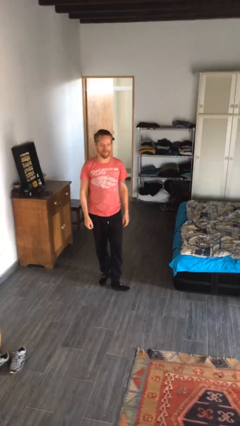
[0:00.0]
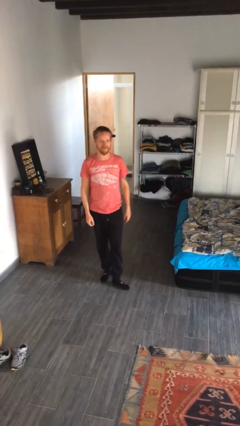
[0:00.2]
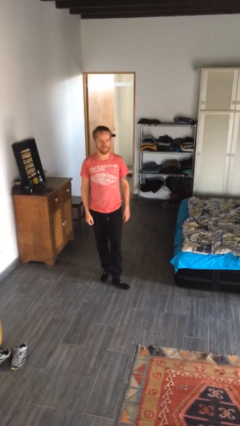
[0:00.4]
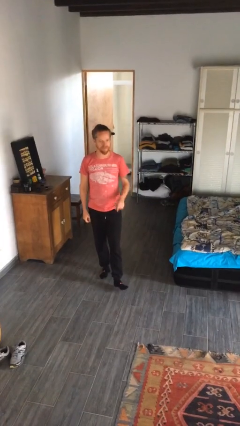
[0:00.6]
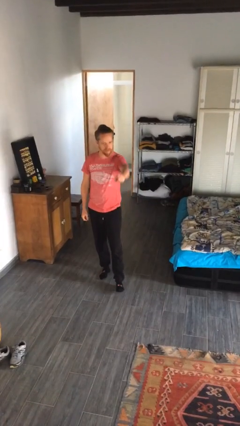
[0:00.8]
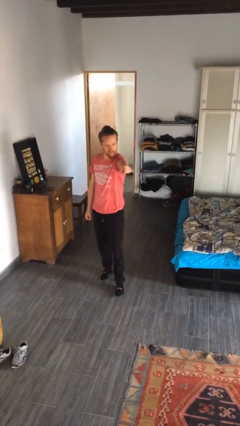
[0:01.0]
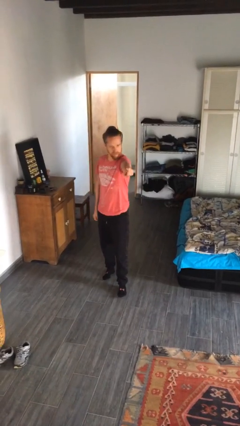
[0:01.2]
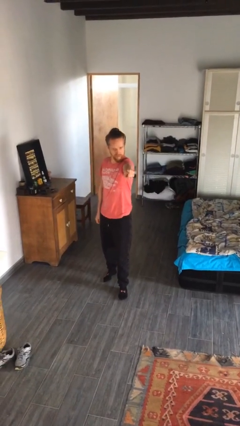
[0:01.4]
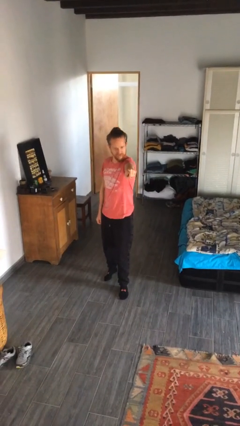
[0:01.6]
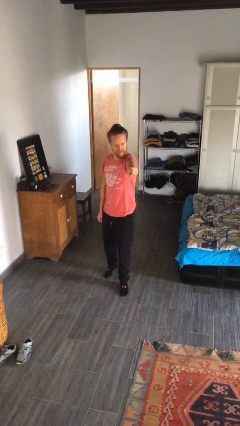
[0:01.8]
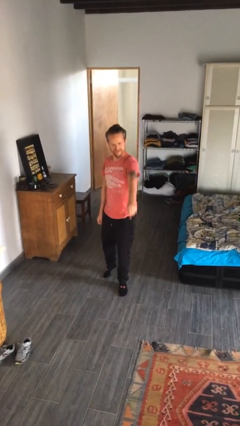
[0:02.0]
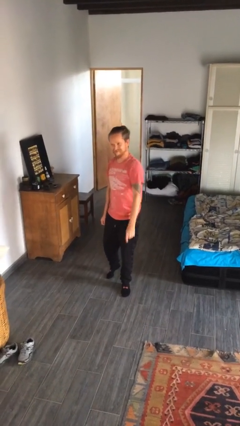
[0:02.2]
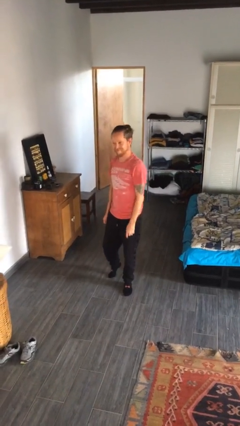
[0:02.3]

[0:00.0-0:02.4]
person points at person

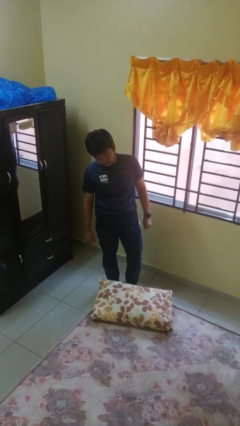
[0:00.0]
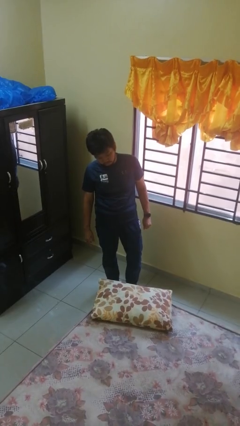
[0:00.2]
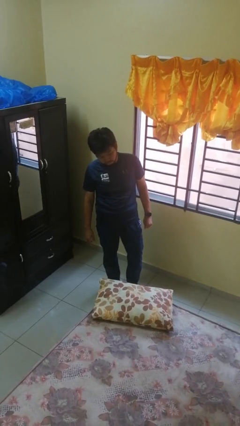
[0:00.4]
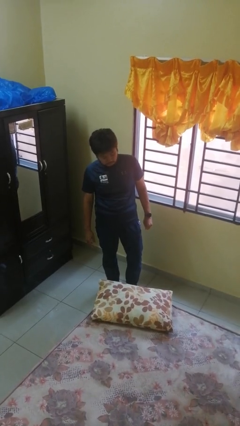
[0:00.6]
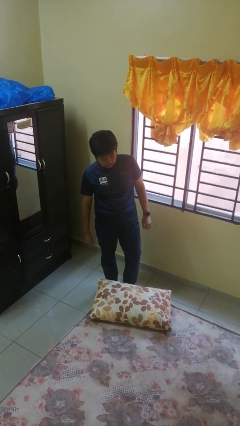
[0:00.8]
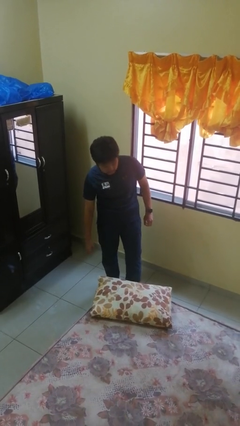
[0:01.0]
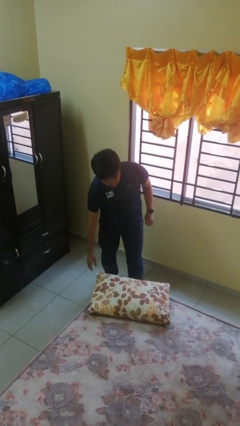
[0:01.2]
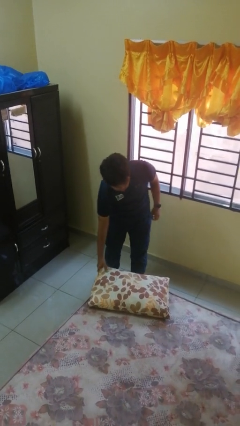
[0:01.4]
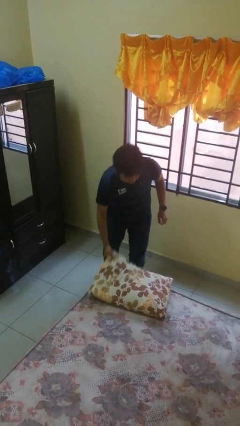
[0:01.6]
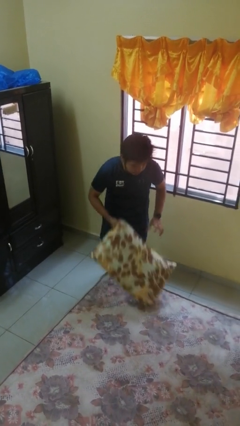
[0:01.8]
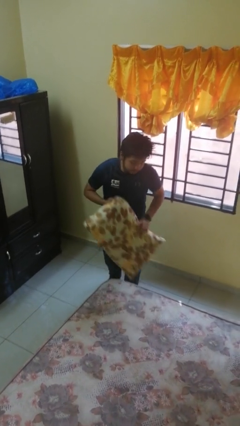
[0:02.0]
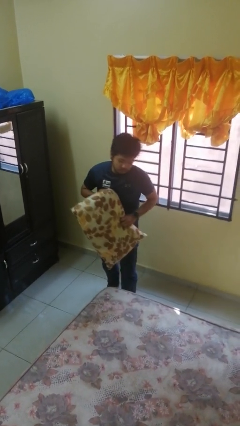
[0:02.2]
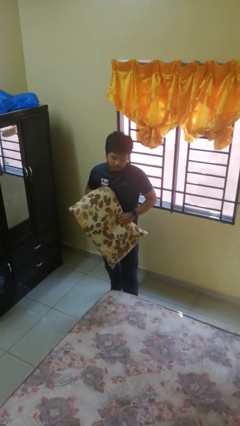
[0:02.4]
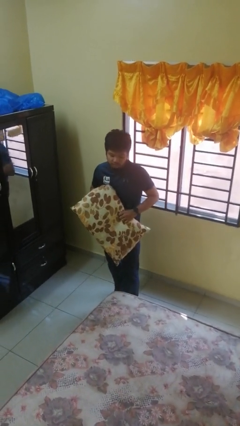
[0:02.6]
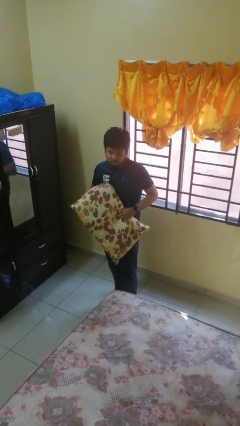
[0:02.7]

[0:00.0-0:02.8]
person picks up object from bed

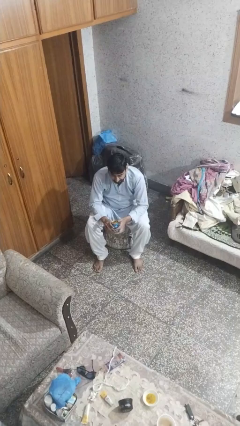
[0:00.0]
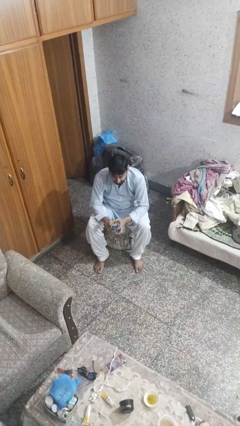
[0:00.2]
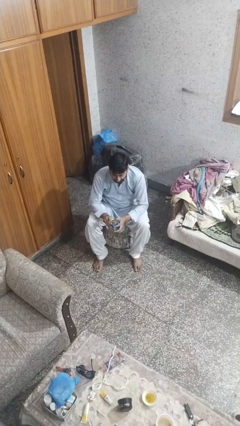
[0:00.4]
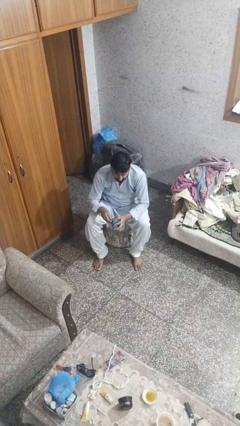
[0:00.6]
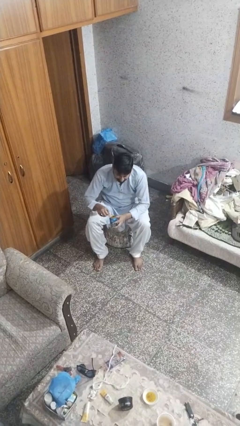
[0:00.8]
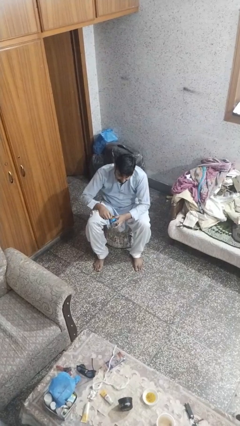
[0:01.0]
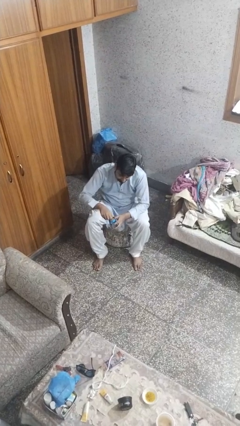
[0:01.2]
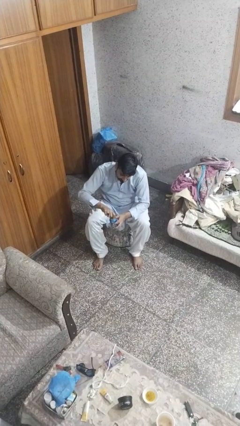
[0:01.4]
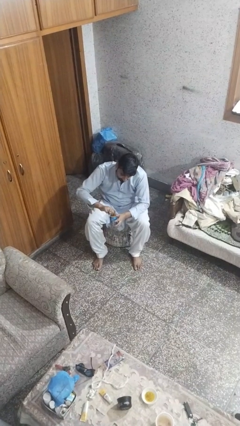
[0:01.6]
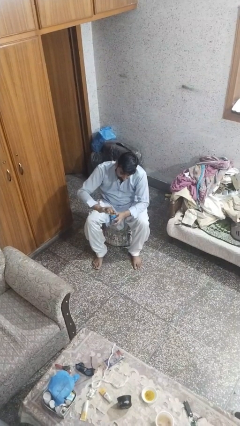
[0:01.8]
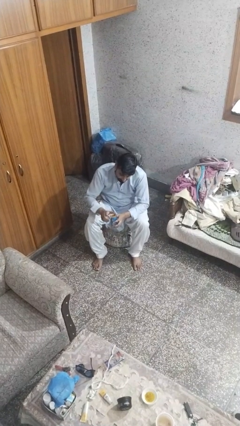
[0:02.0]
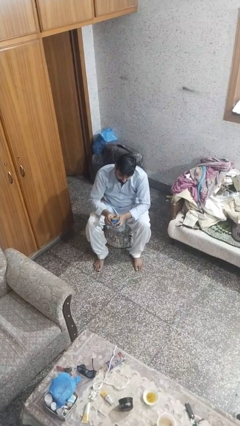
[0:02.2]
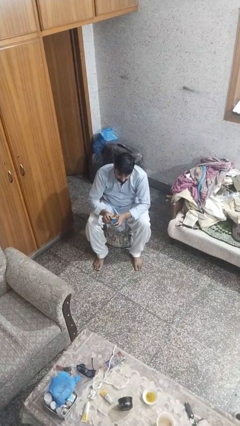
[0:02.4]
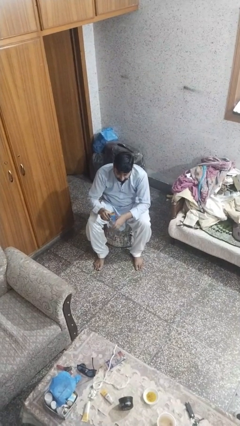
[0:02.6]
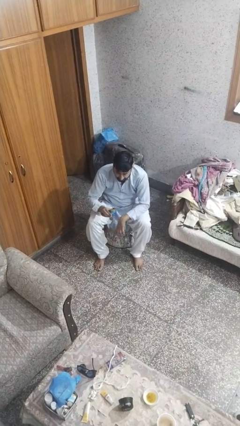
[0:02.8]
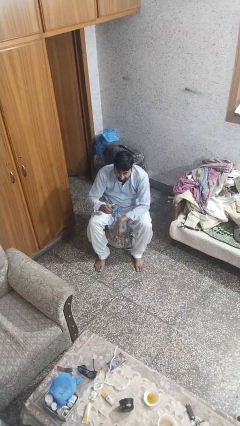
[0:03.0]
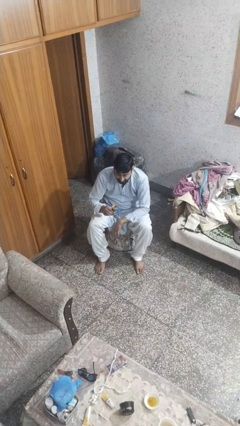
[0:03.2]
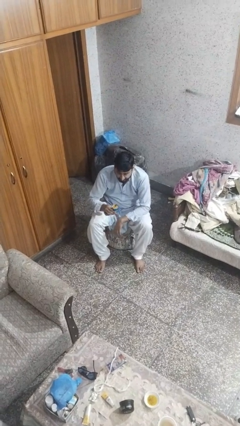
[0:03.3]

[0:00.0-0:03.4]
person opens beverage can

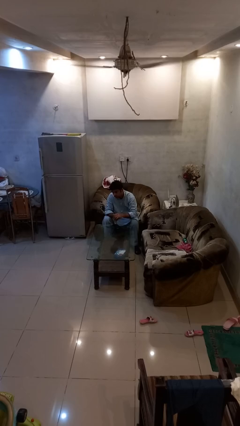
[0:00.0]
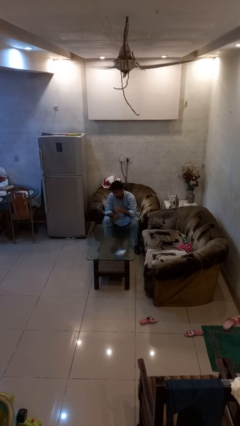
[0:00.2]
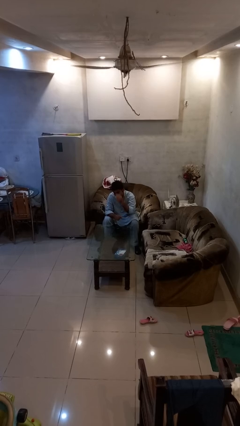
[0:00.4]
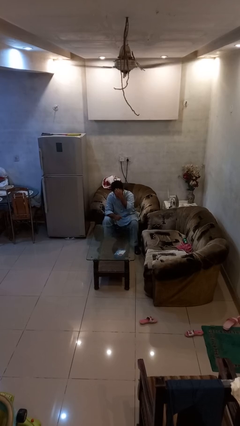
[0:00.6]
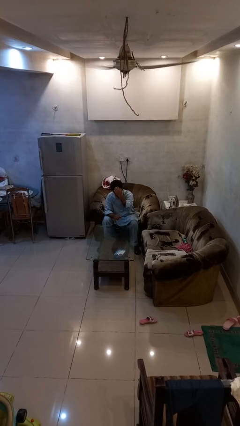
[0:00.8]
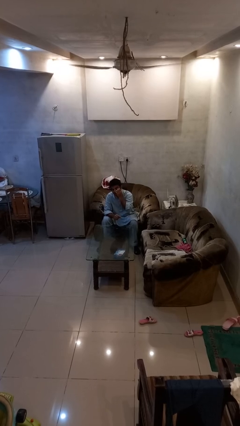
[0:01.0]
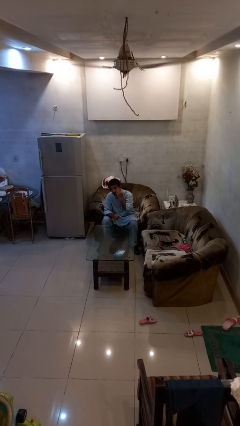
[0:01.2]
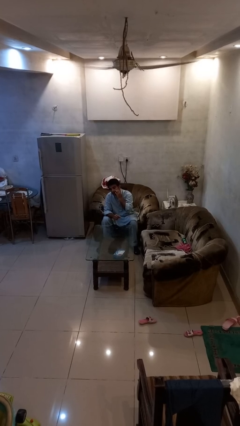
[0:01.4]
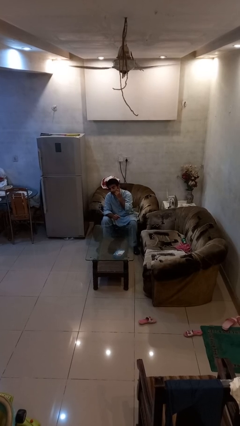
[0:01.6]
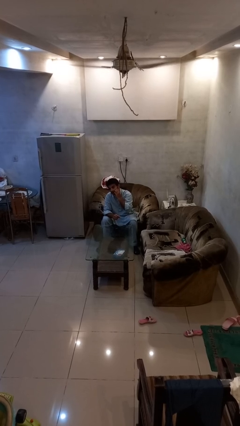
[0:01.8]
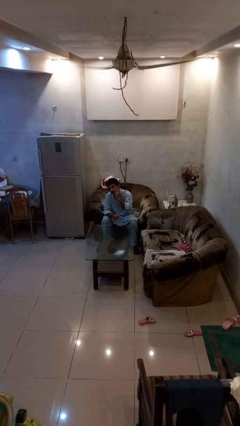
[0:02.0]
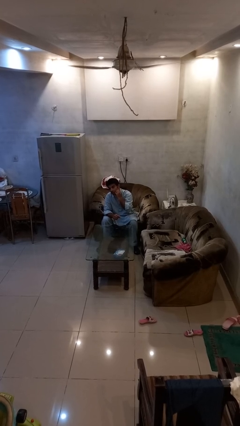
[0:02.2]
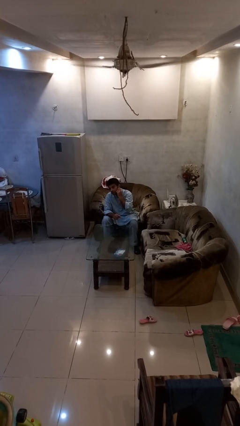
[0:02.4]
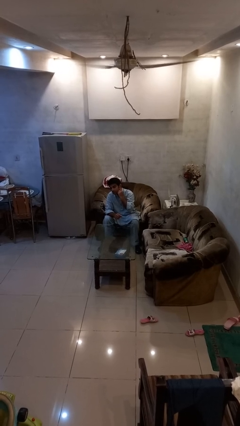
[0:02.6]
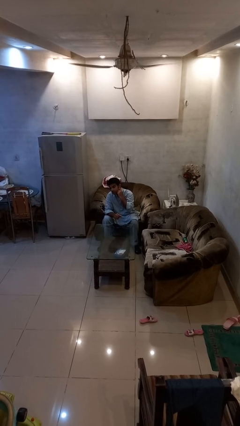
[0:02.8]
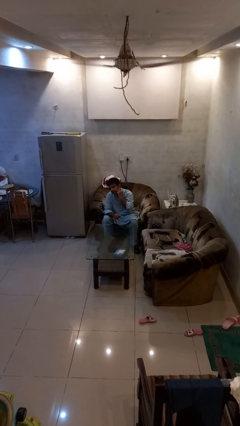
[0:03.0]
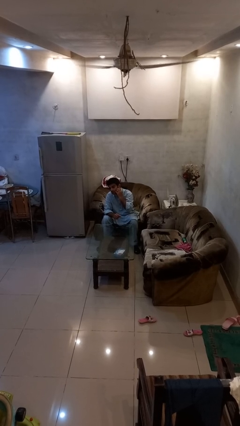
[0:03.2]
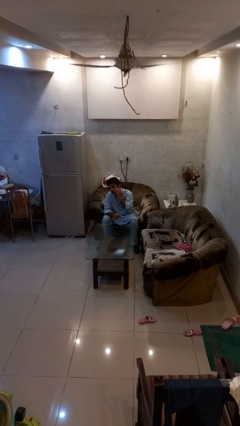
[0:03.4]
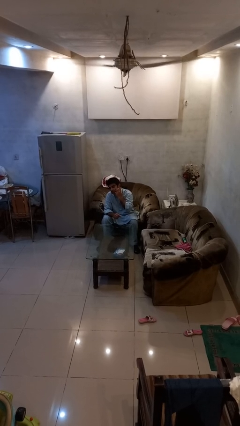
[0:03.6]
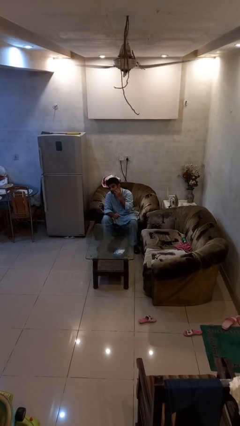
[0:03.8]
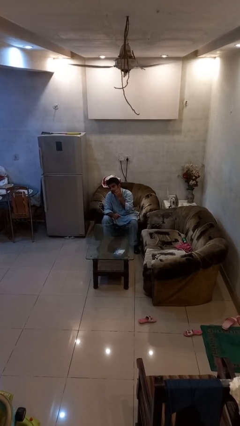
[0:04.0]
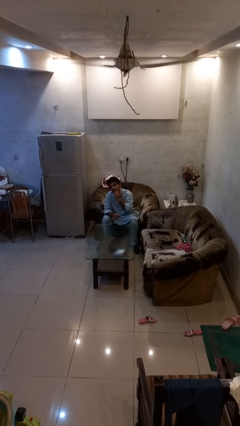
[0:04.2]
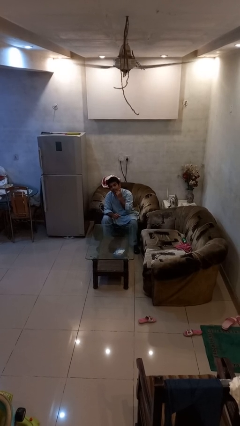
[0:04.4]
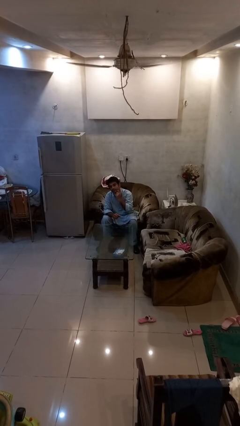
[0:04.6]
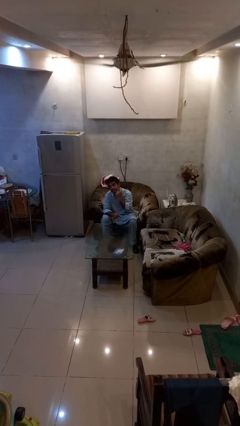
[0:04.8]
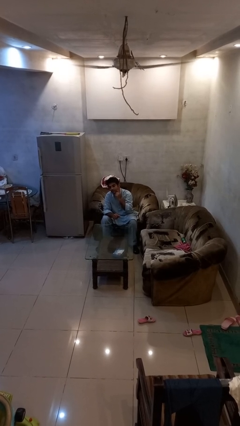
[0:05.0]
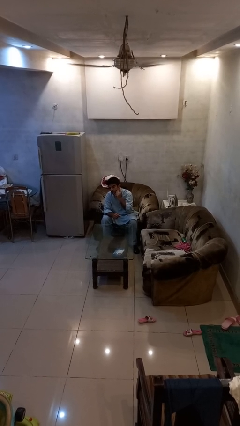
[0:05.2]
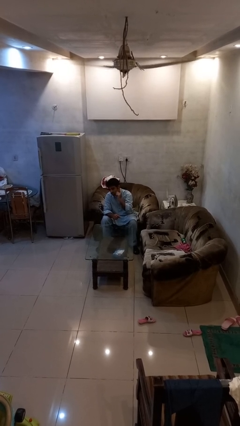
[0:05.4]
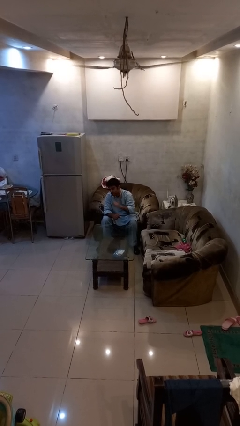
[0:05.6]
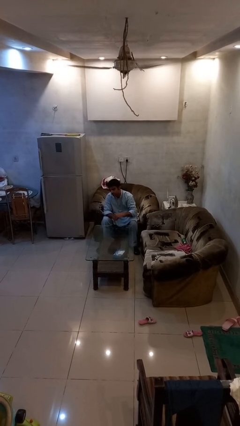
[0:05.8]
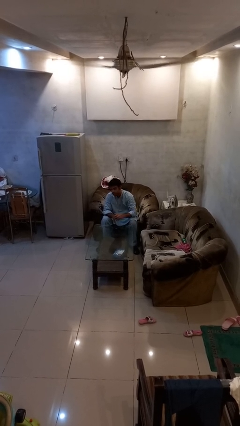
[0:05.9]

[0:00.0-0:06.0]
person scratches face

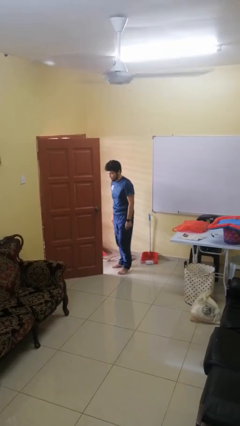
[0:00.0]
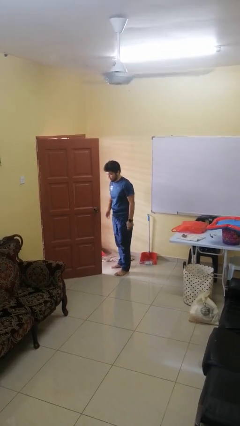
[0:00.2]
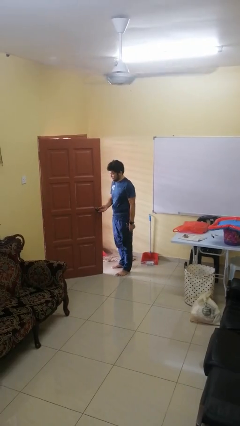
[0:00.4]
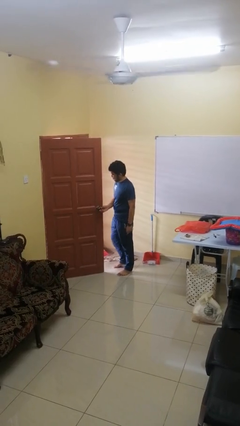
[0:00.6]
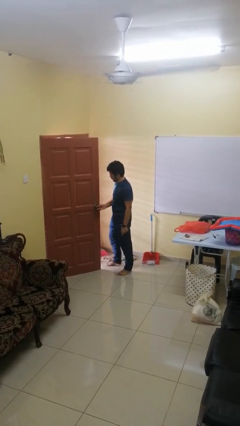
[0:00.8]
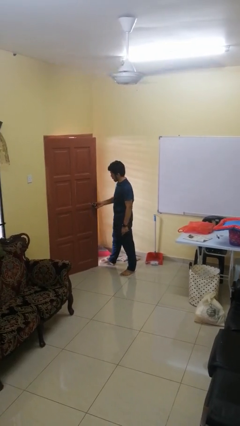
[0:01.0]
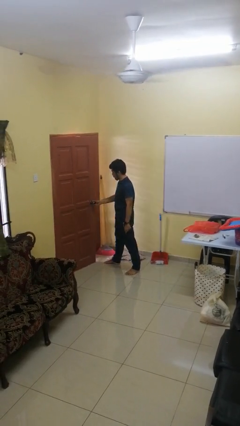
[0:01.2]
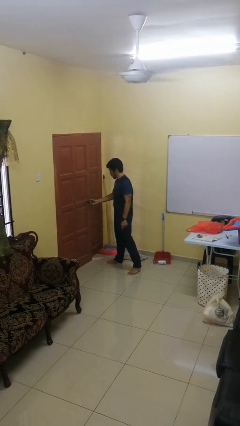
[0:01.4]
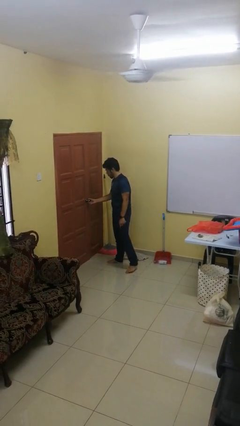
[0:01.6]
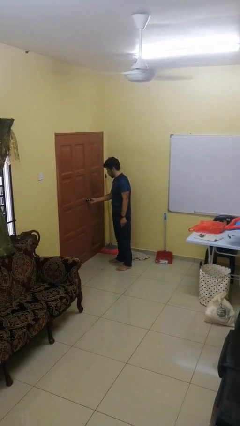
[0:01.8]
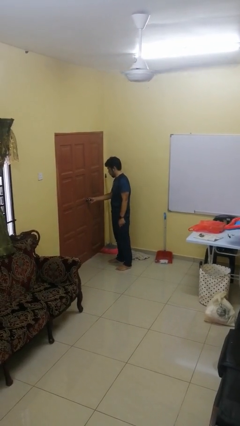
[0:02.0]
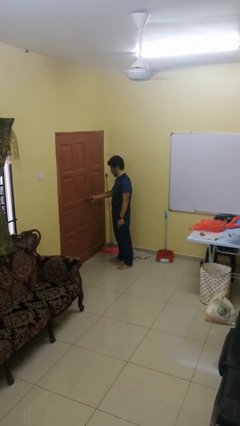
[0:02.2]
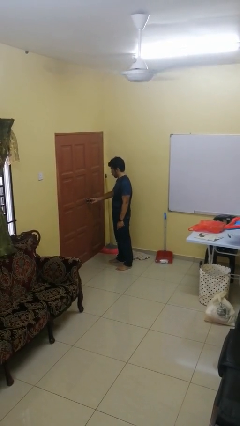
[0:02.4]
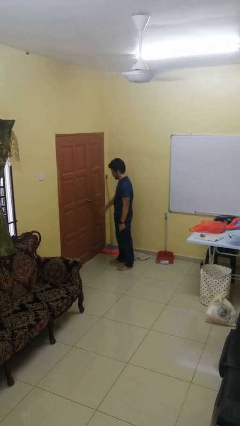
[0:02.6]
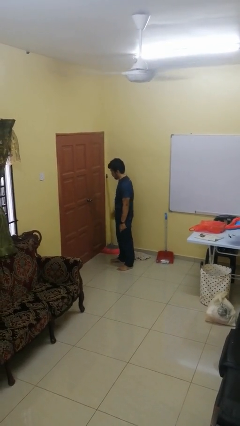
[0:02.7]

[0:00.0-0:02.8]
person closes facility door

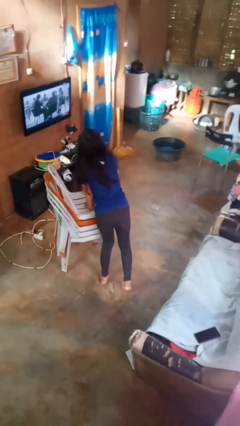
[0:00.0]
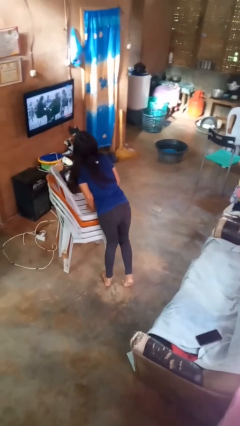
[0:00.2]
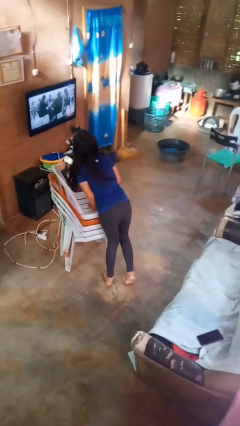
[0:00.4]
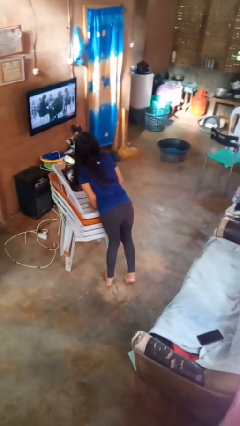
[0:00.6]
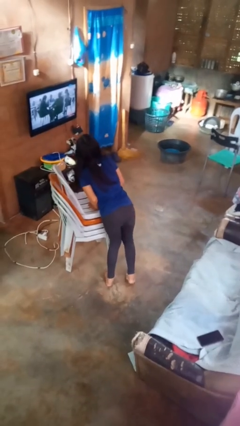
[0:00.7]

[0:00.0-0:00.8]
person trips on object on floor
